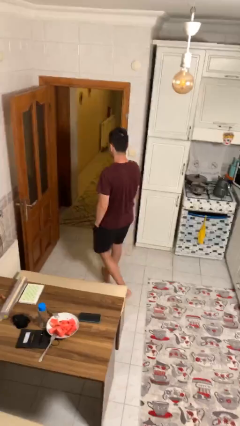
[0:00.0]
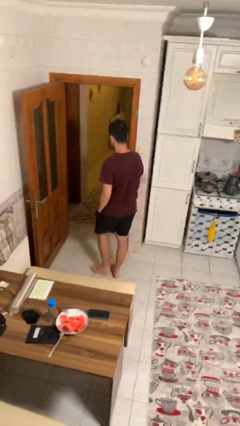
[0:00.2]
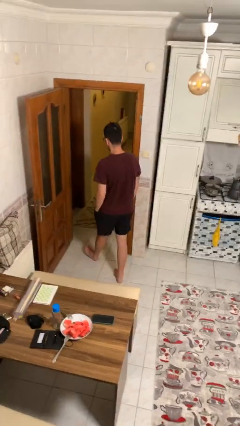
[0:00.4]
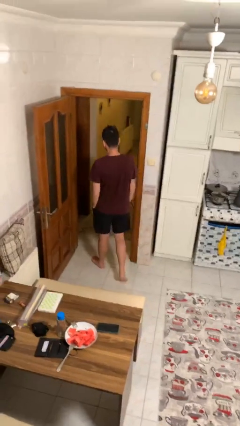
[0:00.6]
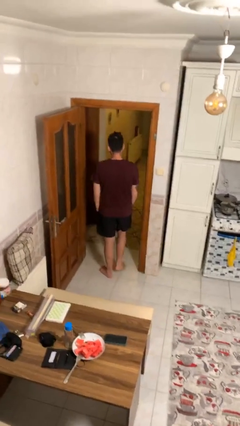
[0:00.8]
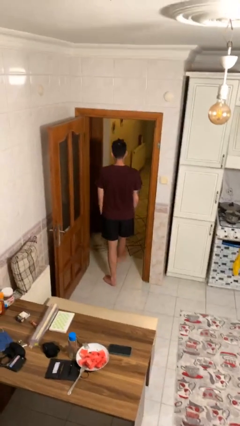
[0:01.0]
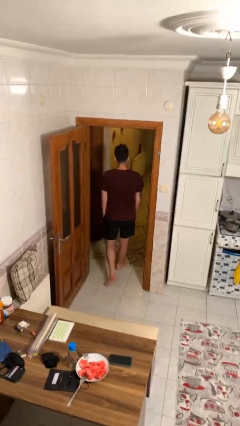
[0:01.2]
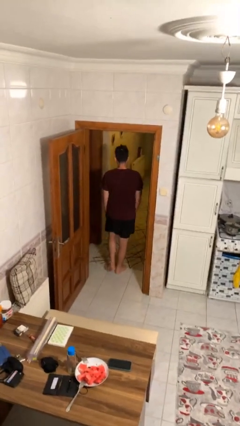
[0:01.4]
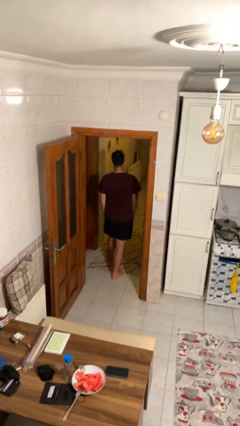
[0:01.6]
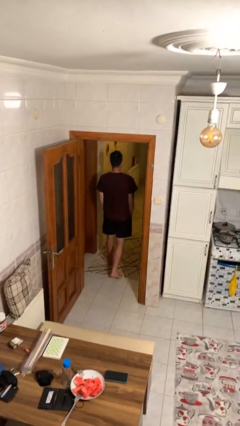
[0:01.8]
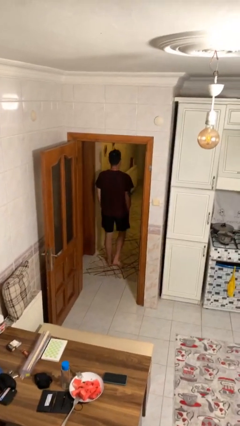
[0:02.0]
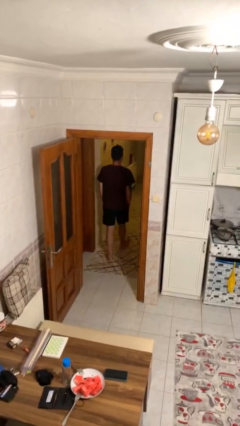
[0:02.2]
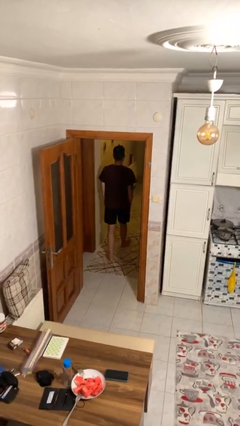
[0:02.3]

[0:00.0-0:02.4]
person exits scene through structure

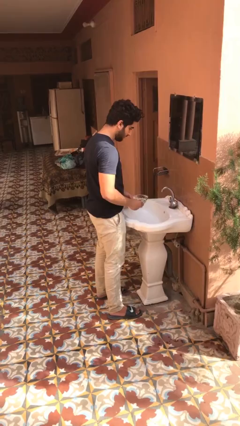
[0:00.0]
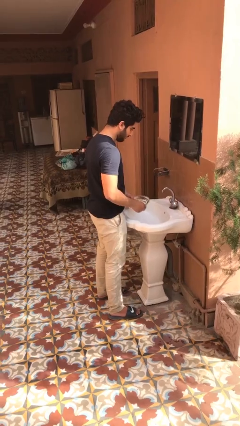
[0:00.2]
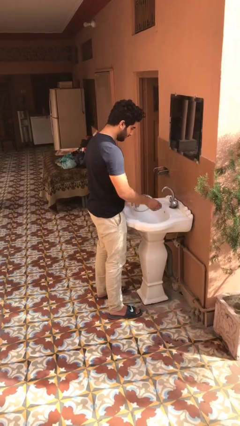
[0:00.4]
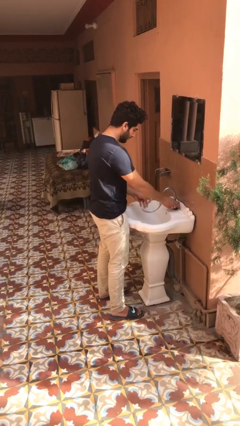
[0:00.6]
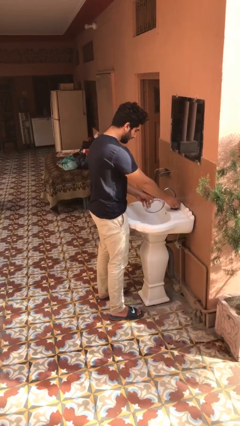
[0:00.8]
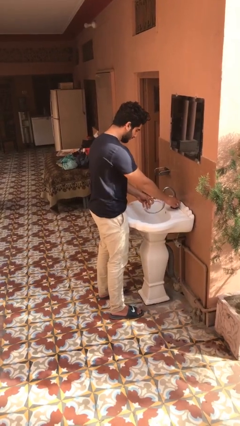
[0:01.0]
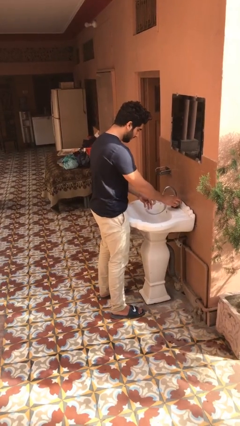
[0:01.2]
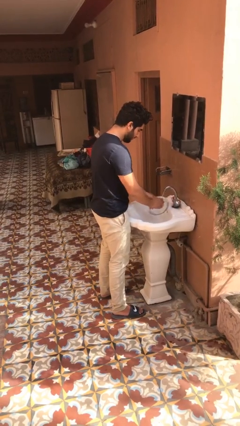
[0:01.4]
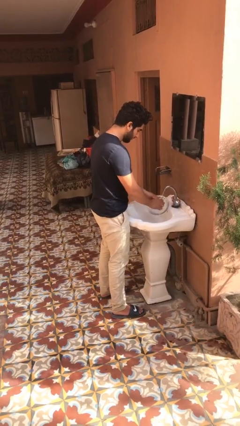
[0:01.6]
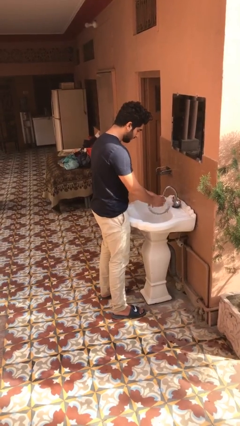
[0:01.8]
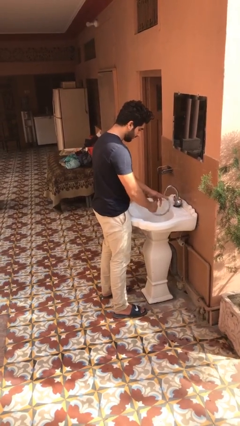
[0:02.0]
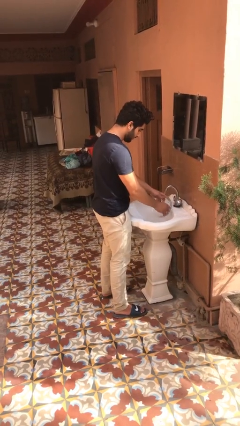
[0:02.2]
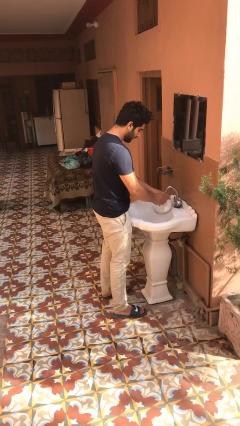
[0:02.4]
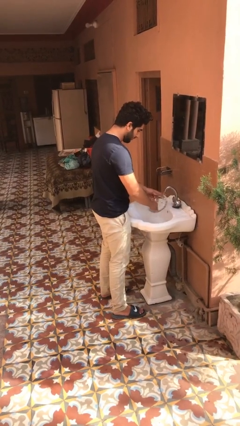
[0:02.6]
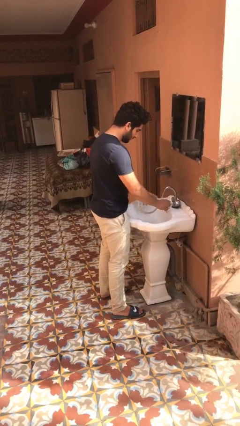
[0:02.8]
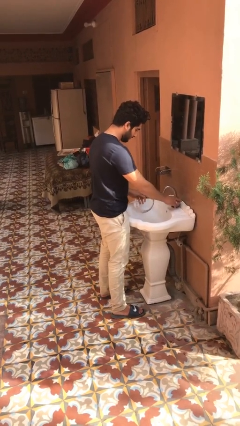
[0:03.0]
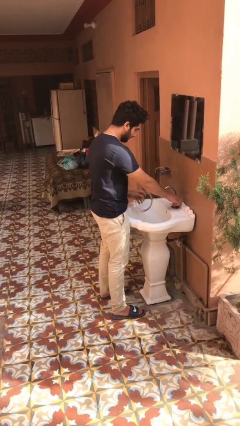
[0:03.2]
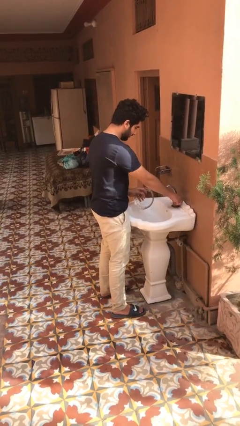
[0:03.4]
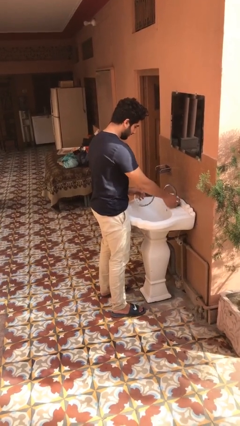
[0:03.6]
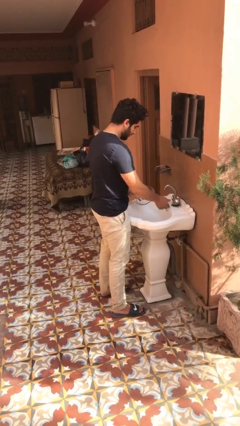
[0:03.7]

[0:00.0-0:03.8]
person washes dish

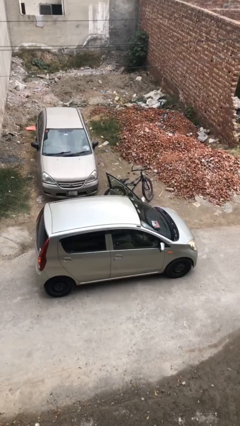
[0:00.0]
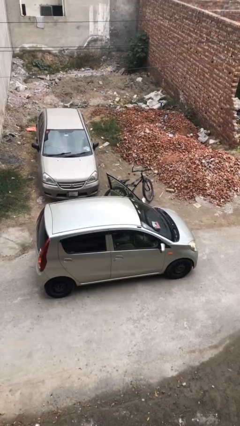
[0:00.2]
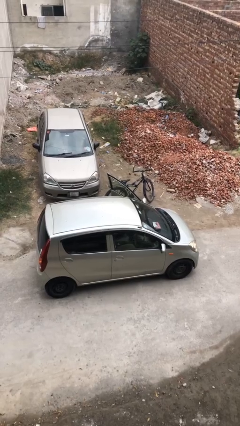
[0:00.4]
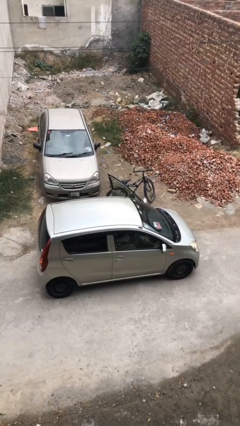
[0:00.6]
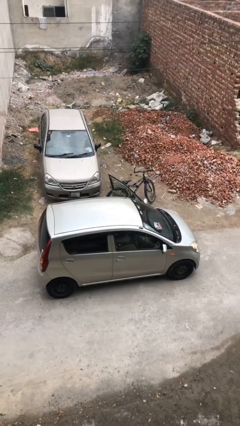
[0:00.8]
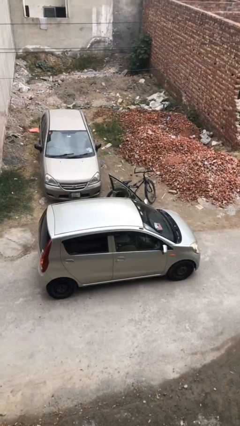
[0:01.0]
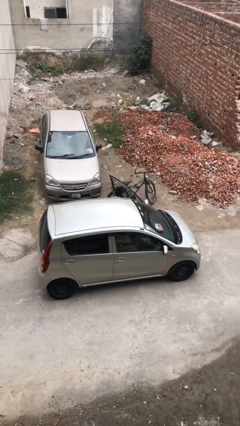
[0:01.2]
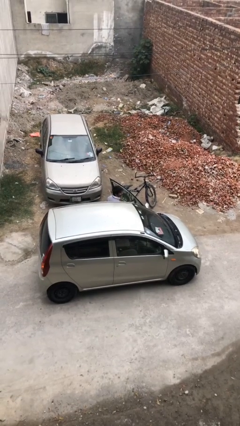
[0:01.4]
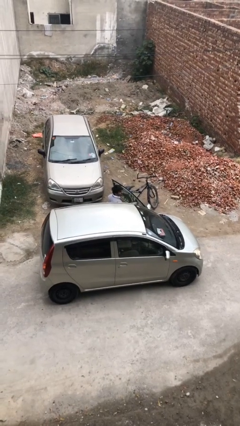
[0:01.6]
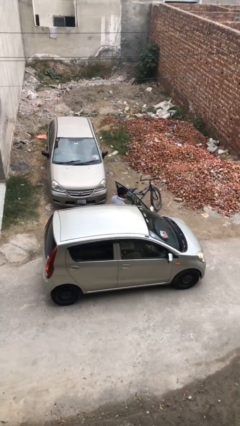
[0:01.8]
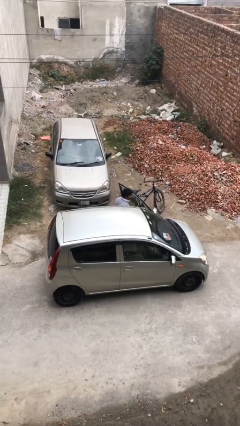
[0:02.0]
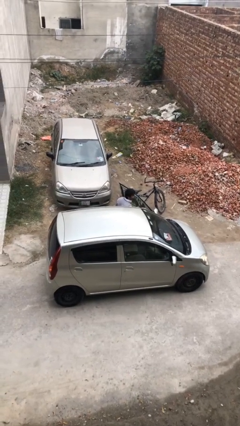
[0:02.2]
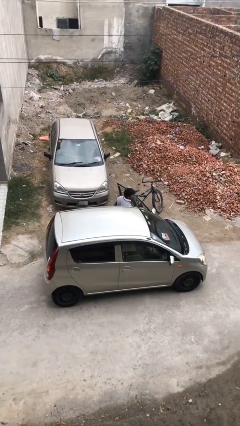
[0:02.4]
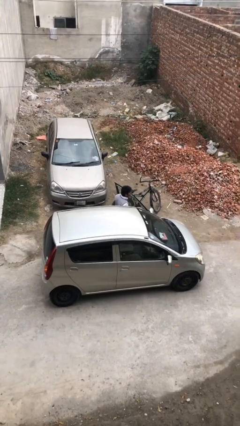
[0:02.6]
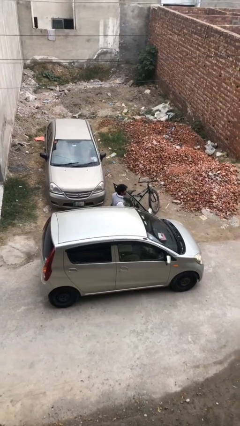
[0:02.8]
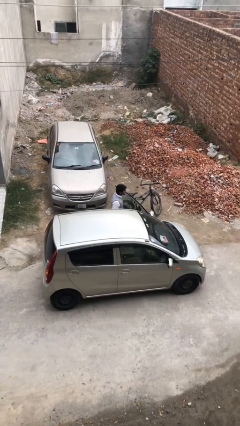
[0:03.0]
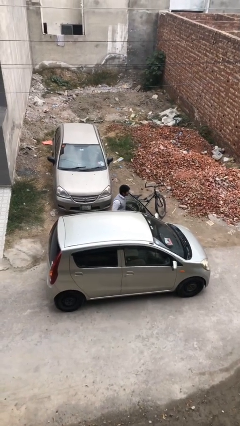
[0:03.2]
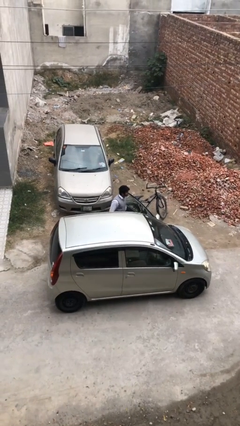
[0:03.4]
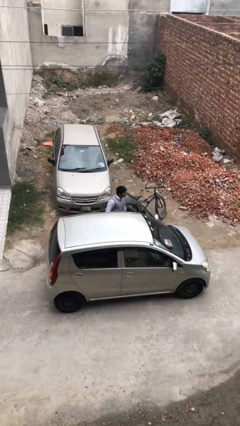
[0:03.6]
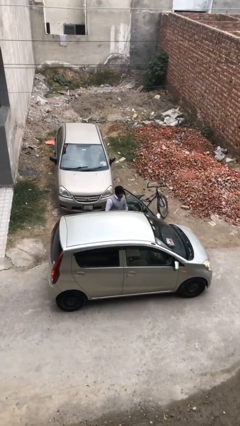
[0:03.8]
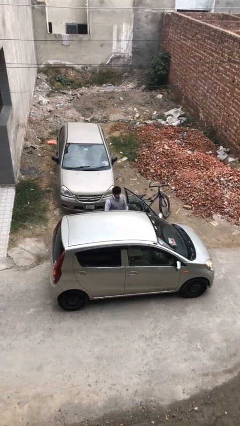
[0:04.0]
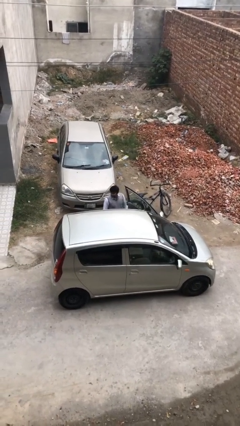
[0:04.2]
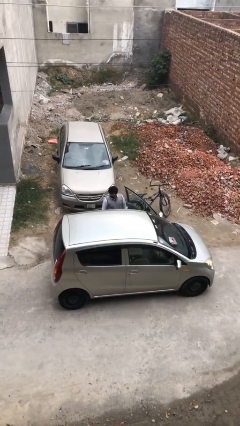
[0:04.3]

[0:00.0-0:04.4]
person exits car

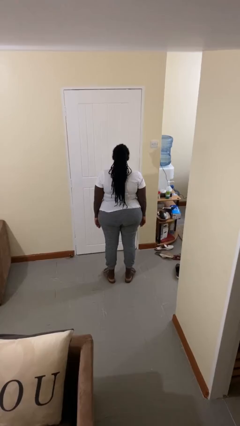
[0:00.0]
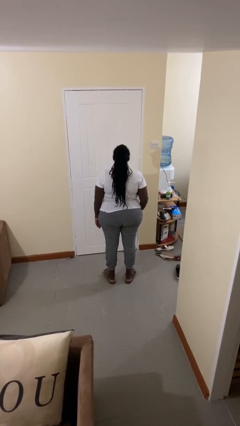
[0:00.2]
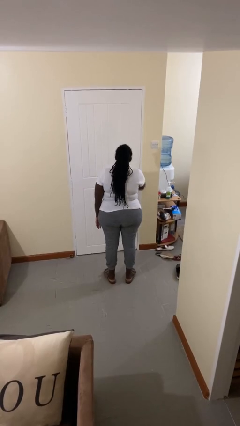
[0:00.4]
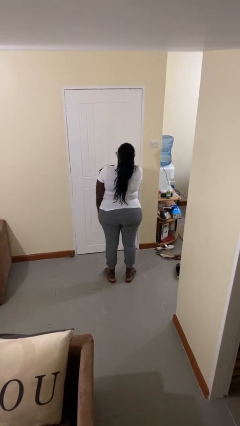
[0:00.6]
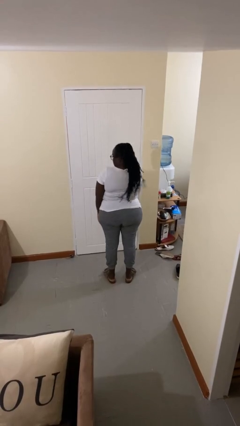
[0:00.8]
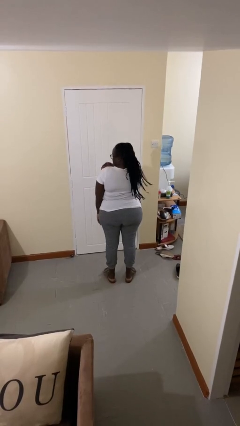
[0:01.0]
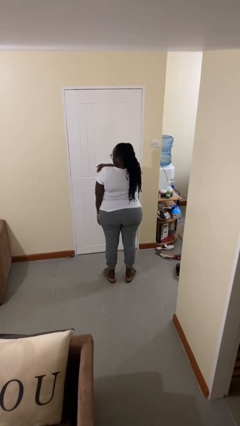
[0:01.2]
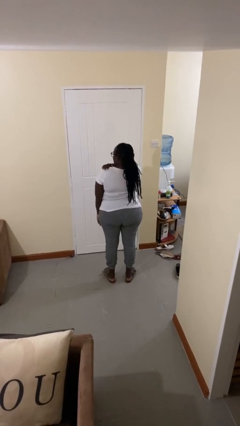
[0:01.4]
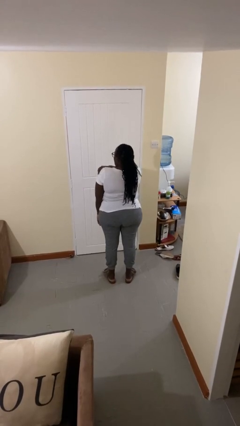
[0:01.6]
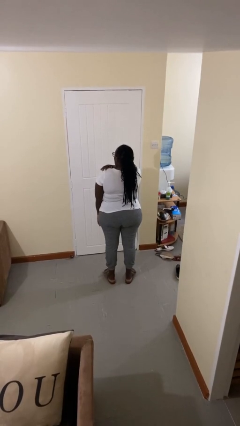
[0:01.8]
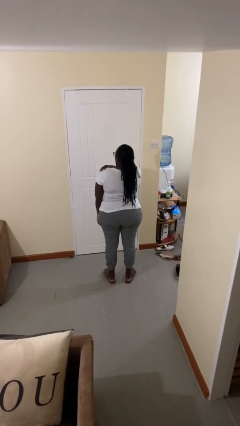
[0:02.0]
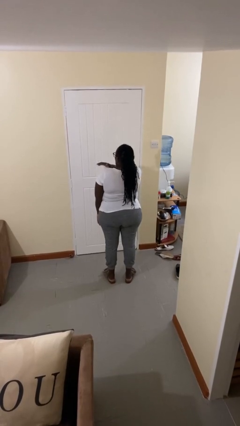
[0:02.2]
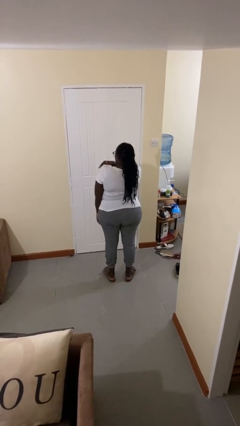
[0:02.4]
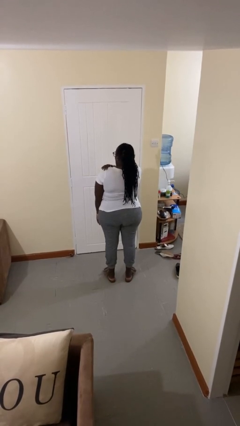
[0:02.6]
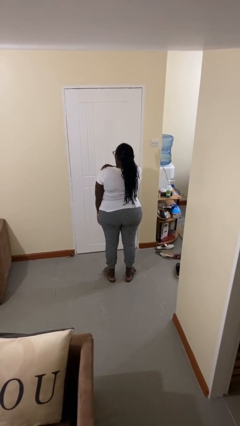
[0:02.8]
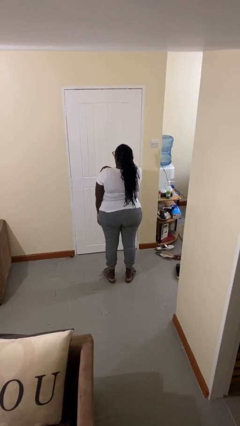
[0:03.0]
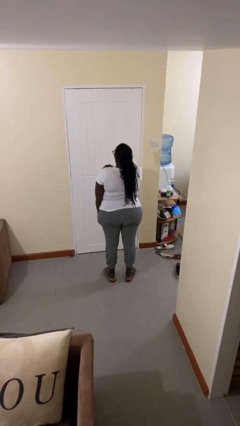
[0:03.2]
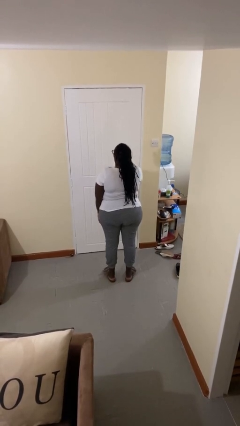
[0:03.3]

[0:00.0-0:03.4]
person swats bug

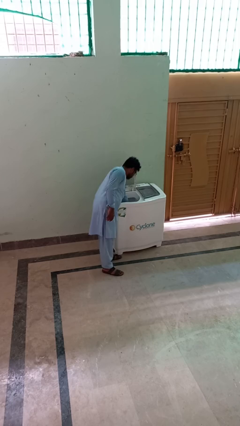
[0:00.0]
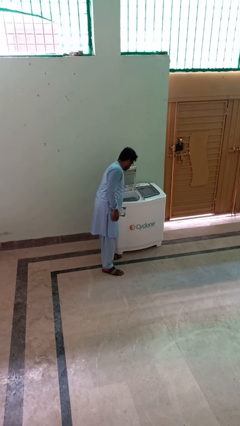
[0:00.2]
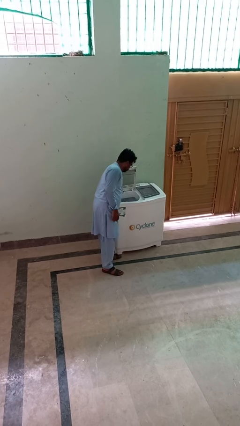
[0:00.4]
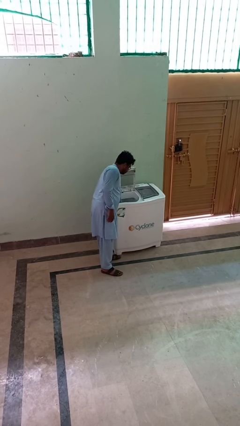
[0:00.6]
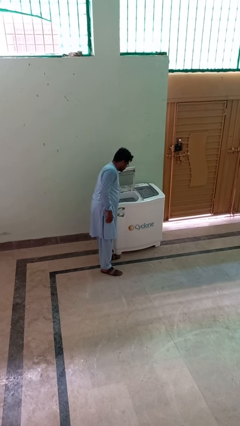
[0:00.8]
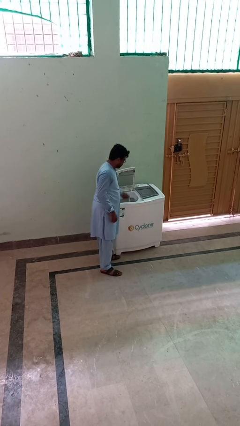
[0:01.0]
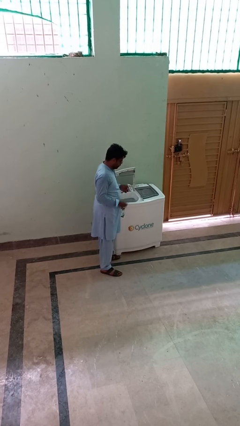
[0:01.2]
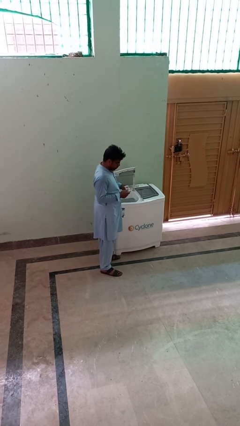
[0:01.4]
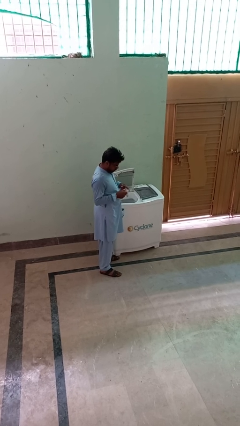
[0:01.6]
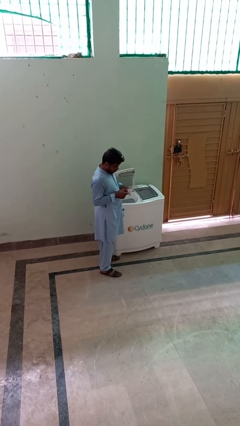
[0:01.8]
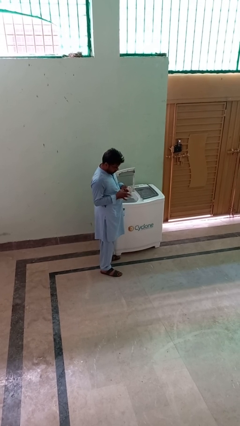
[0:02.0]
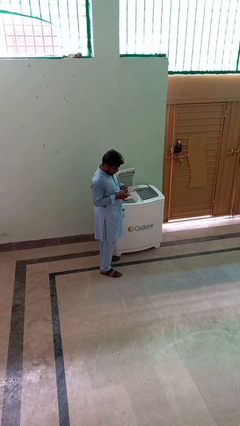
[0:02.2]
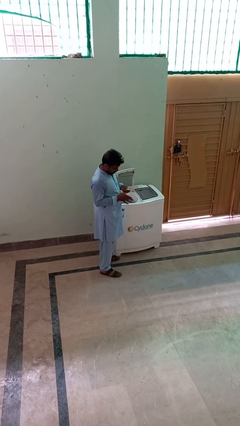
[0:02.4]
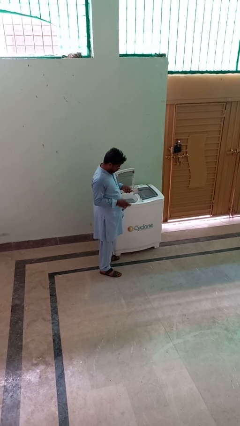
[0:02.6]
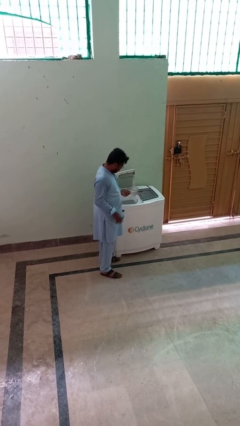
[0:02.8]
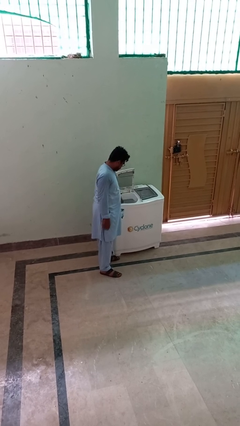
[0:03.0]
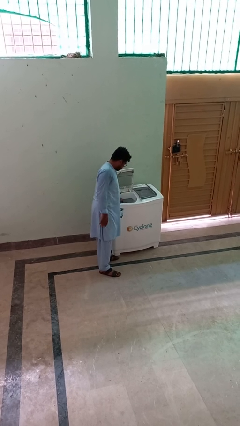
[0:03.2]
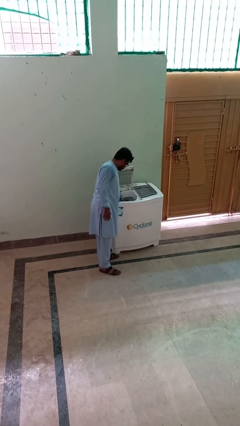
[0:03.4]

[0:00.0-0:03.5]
person cleans dryer lint trap
